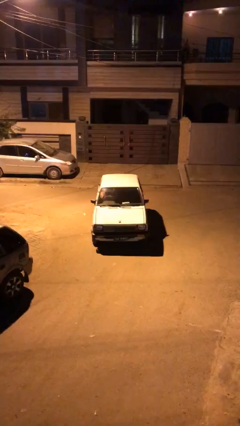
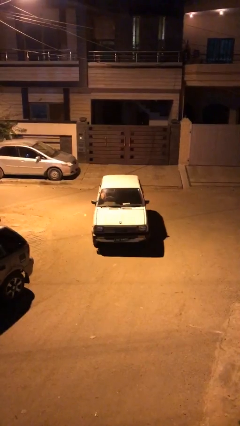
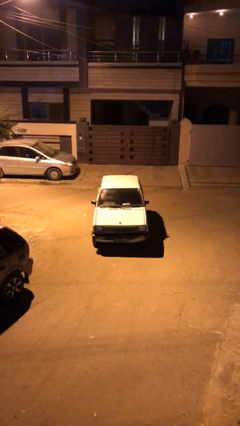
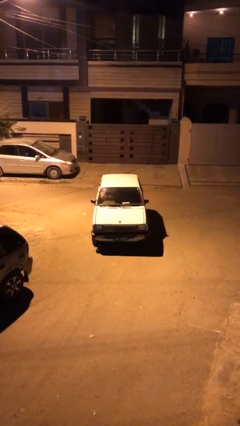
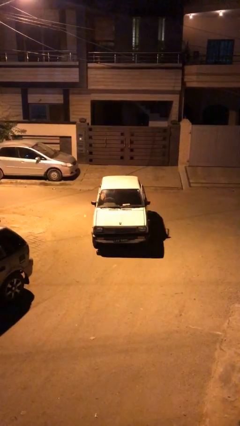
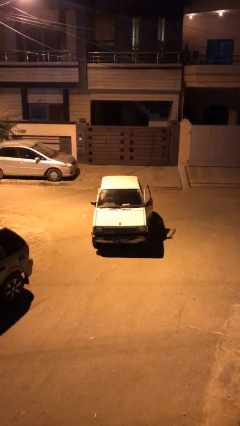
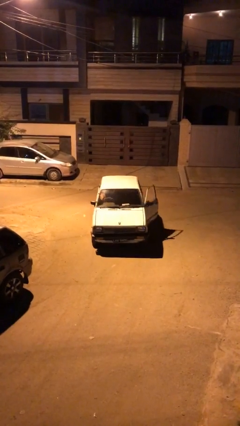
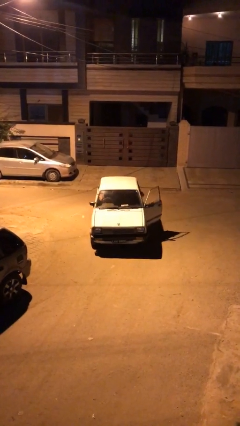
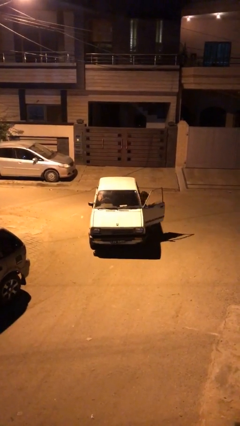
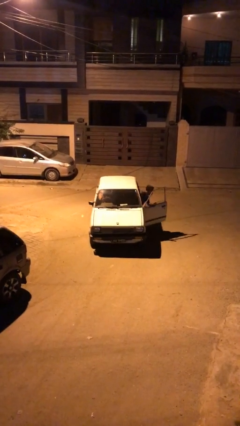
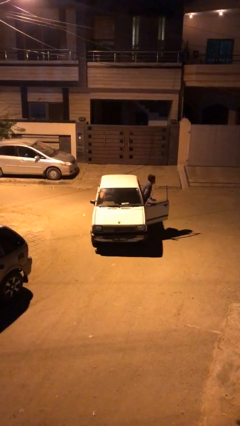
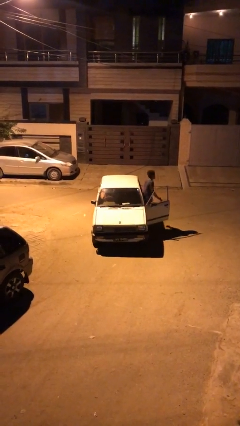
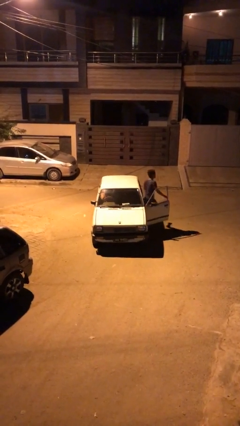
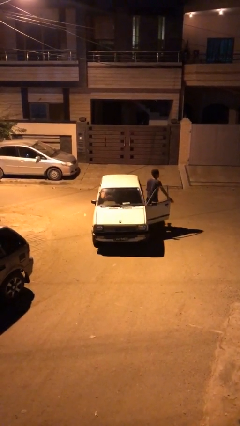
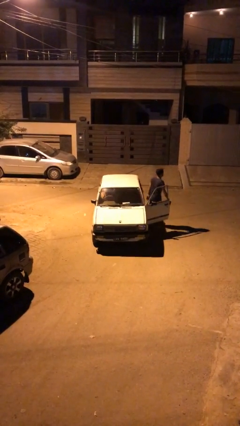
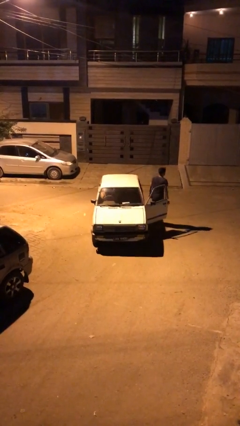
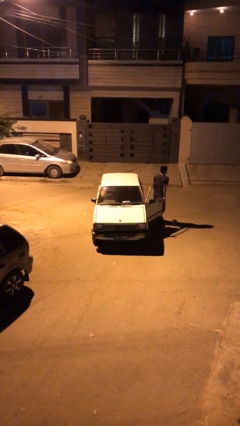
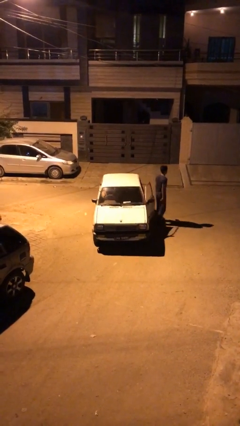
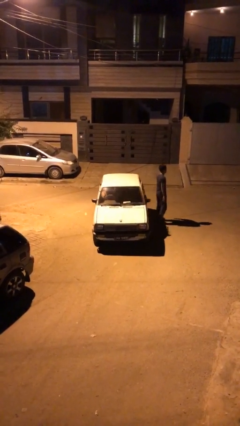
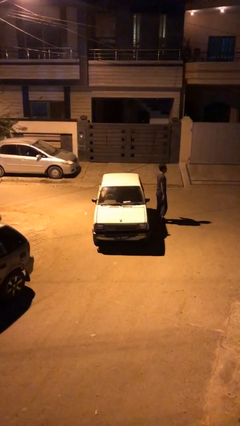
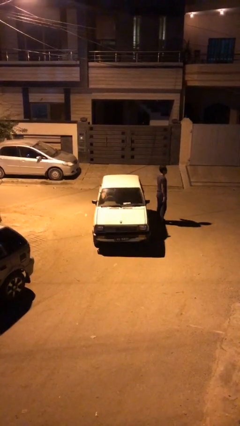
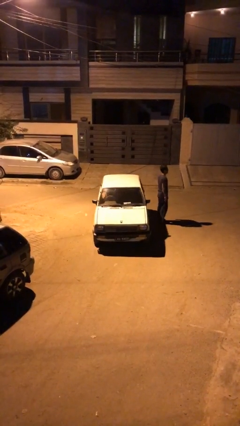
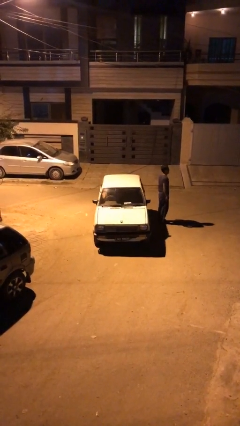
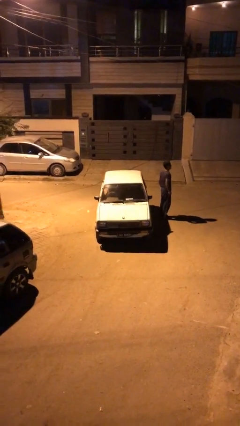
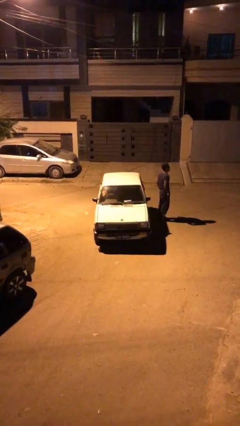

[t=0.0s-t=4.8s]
car drops off person

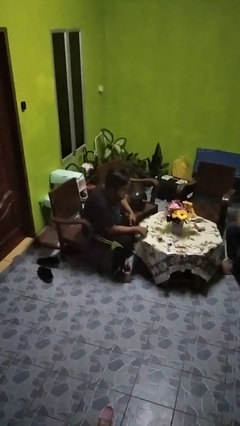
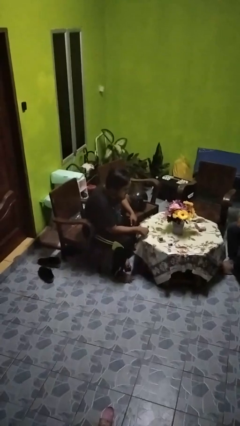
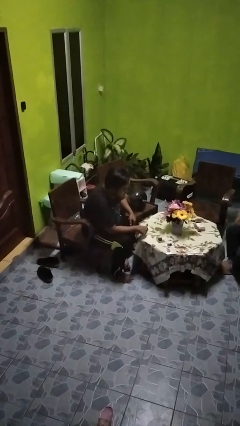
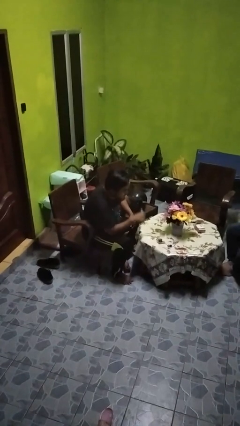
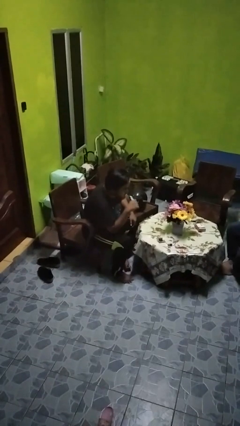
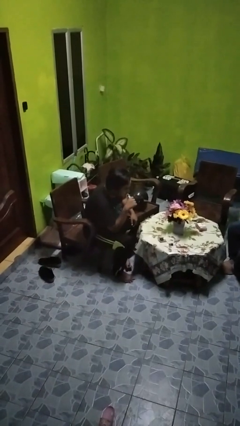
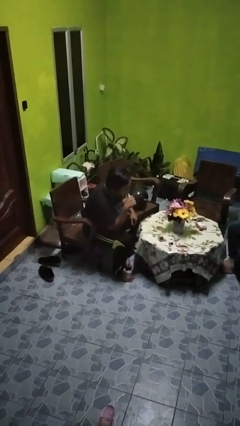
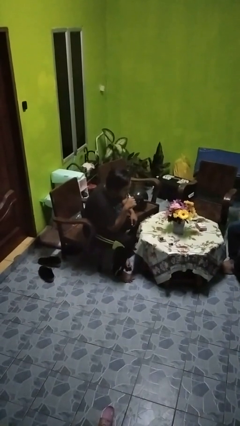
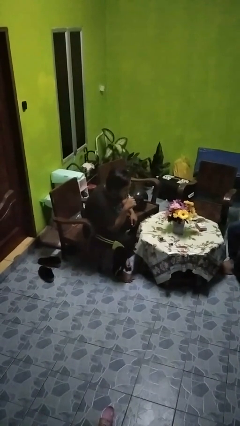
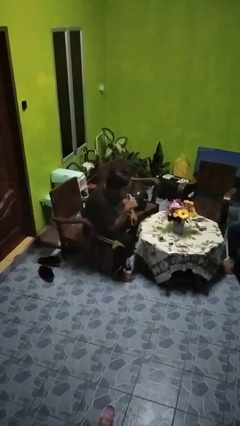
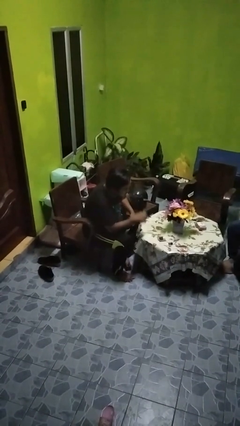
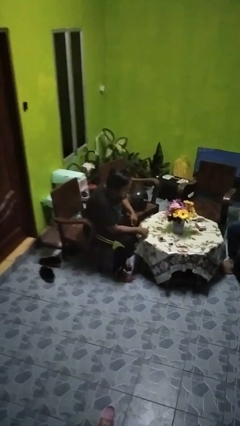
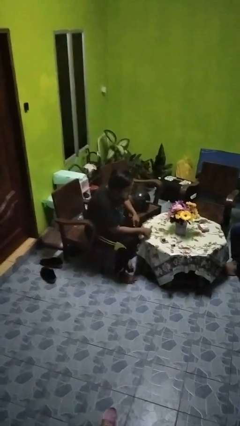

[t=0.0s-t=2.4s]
person vapes

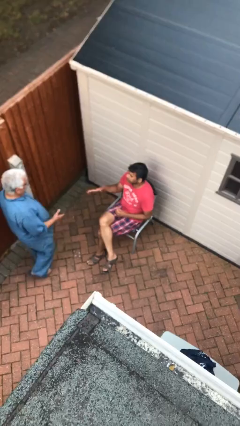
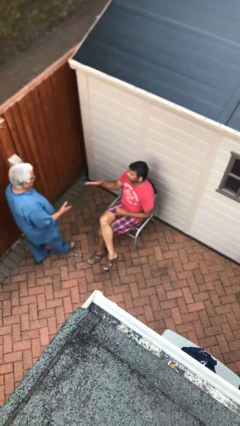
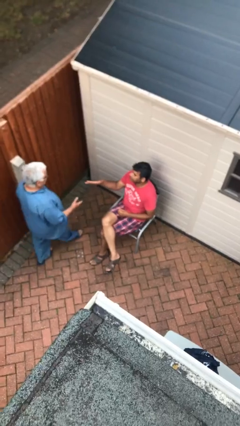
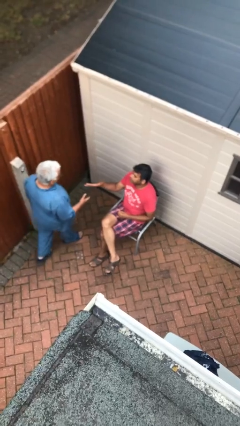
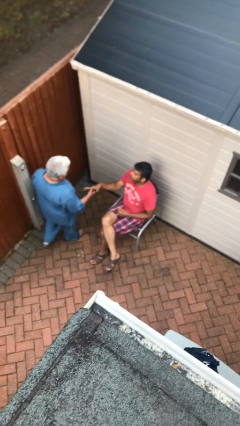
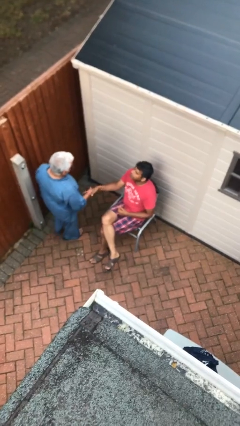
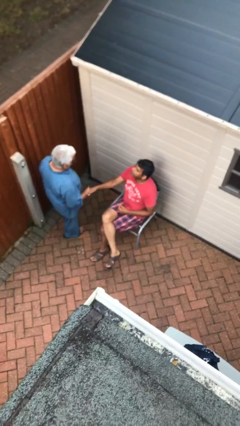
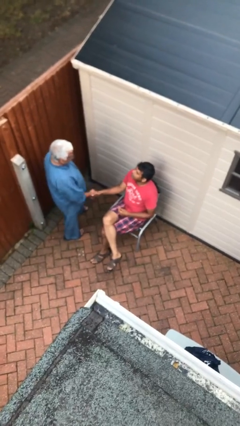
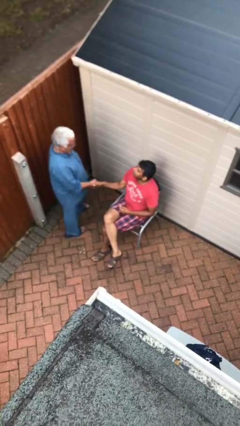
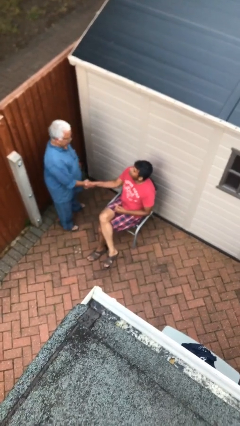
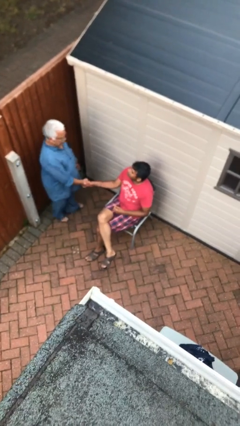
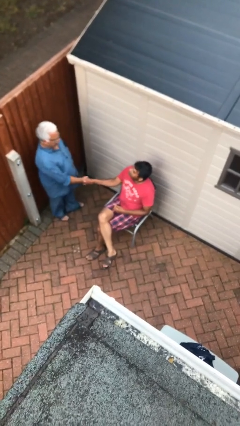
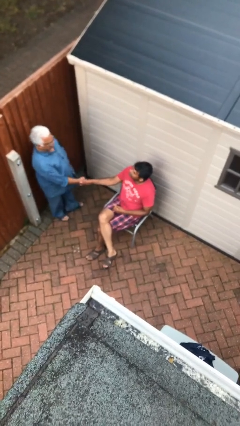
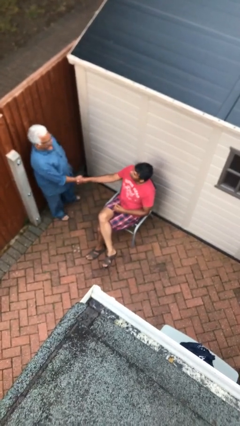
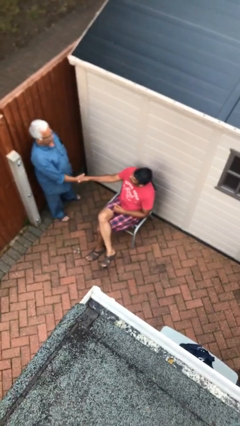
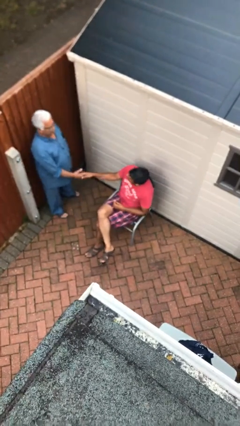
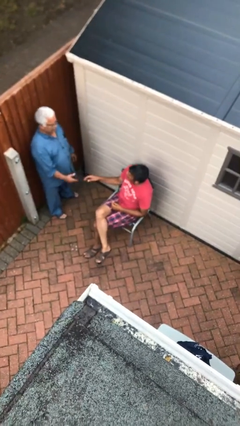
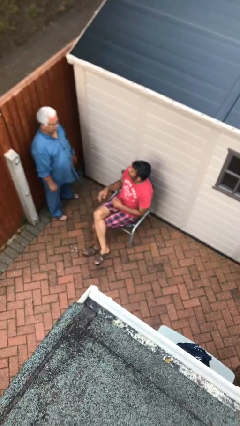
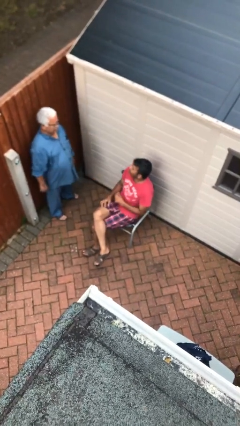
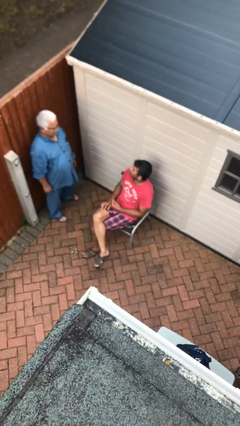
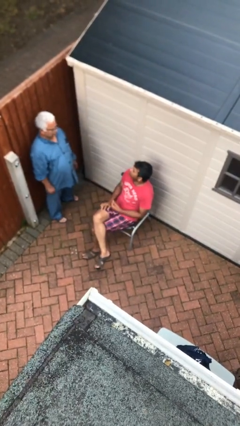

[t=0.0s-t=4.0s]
person shakes hand

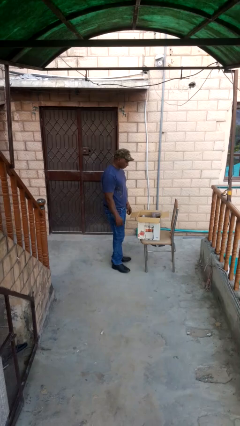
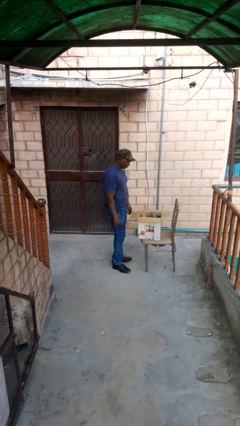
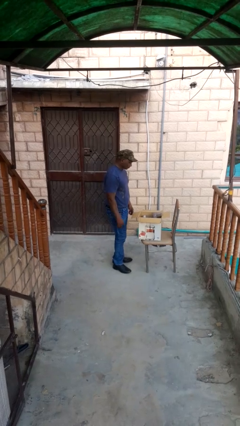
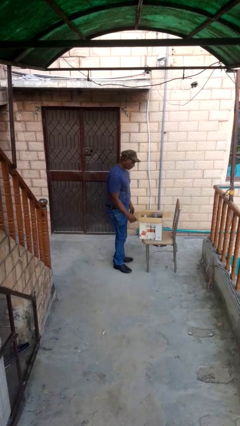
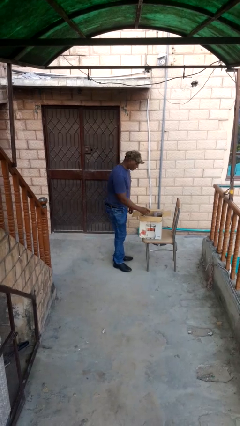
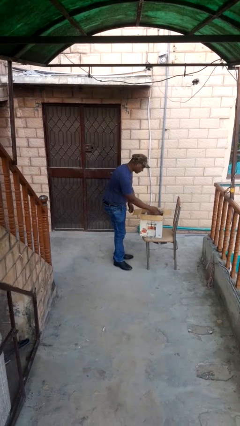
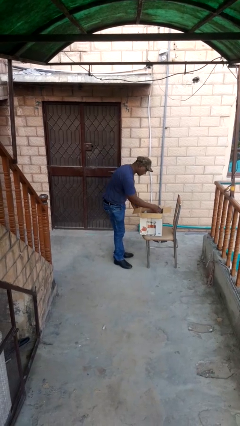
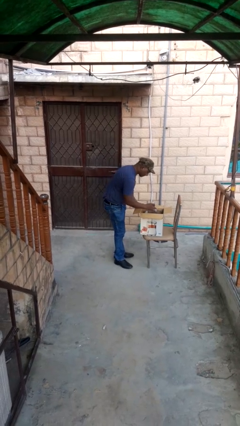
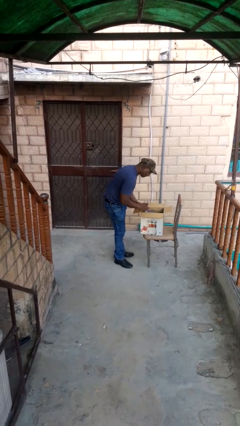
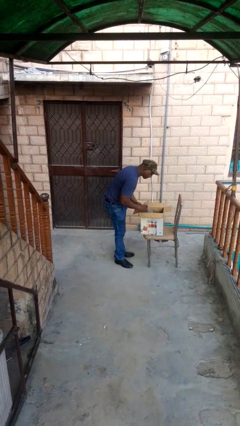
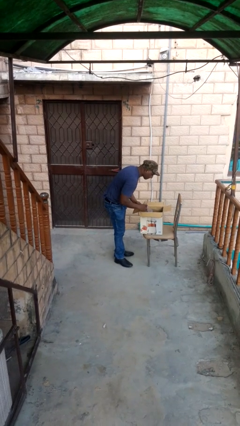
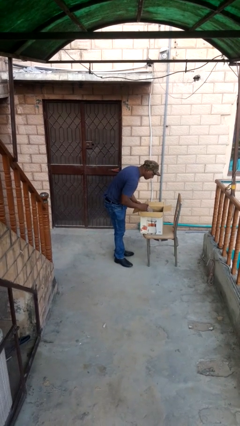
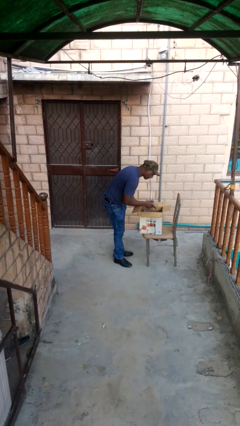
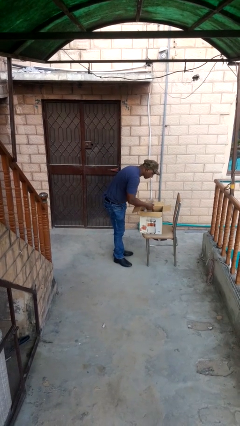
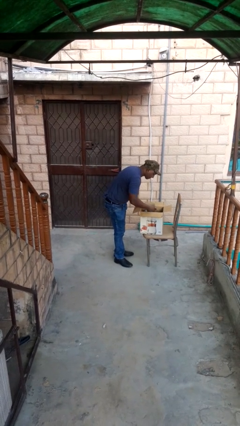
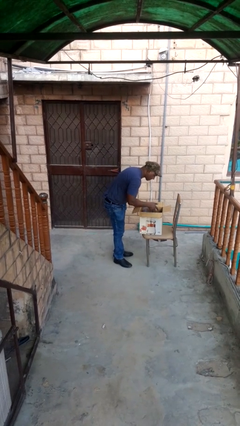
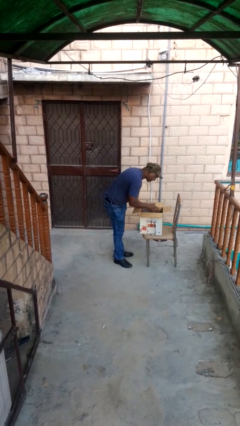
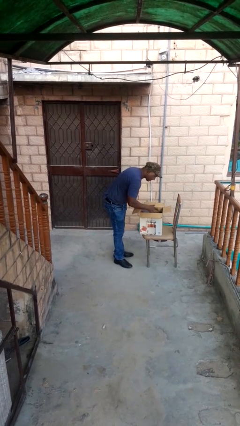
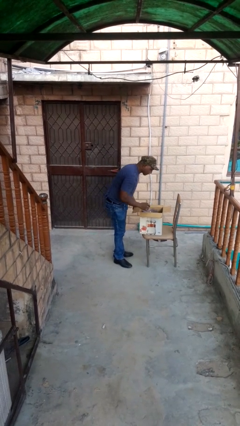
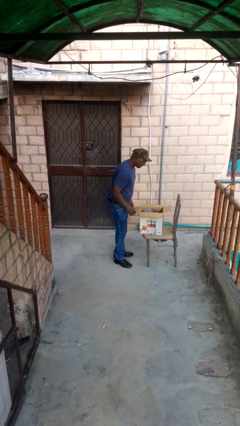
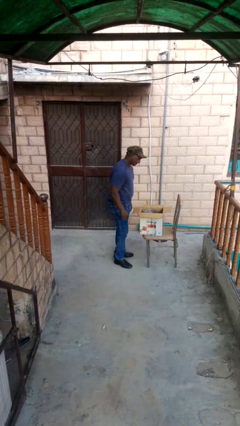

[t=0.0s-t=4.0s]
person searches in box

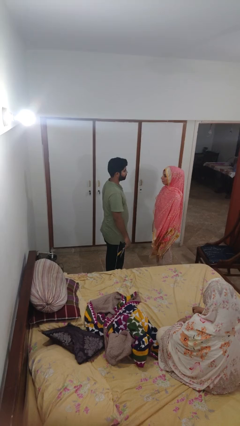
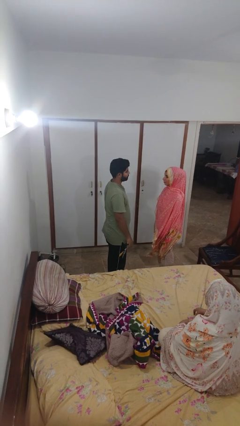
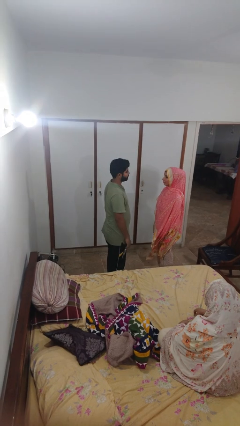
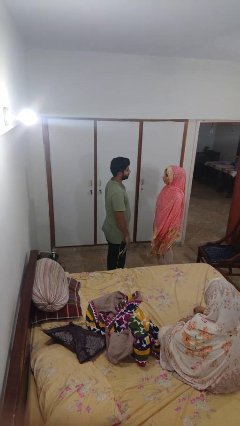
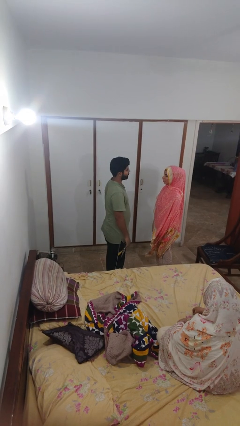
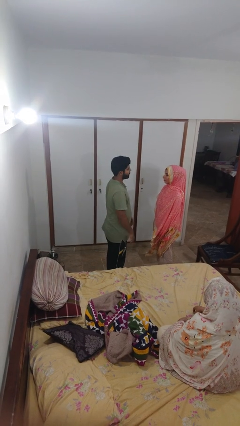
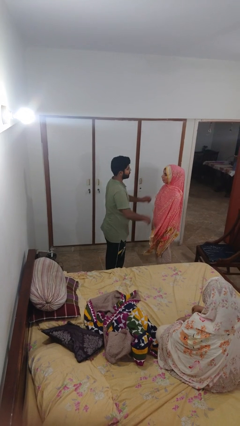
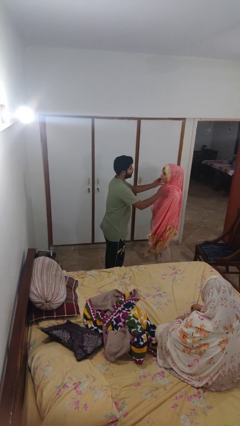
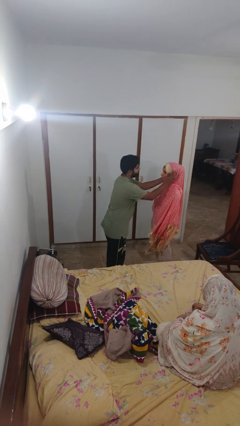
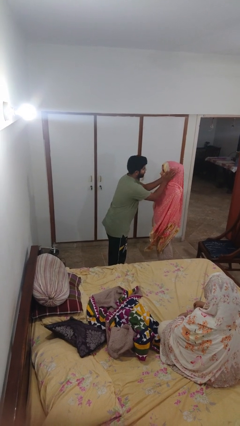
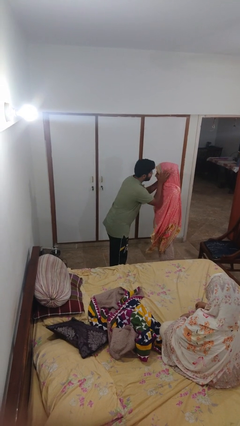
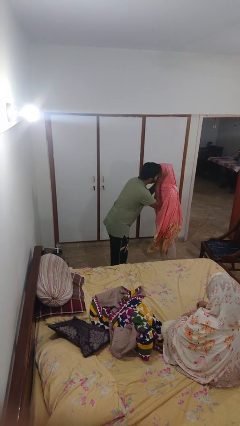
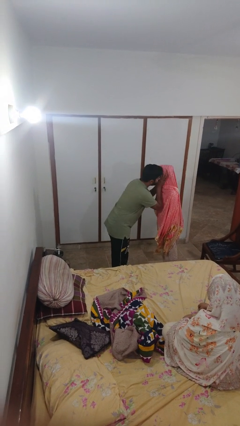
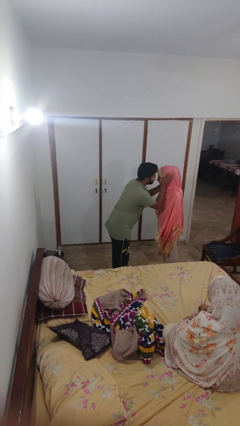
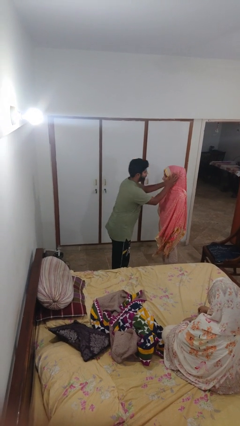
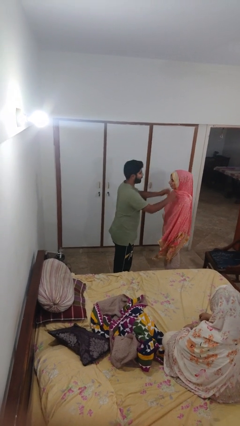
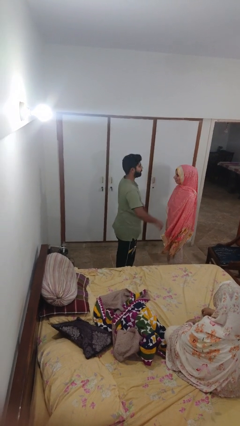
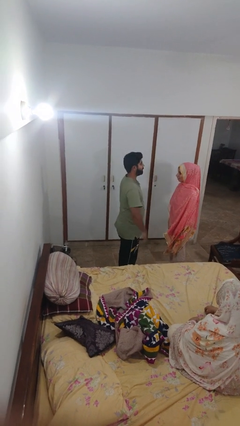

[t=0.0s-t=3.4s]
person kisses cheek of person
